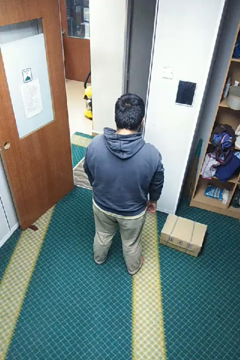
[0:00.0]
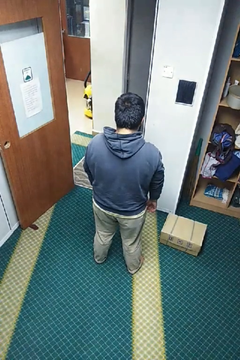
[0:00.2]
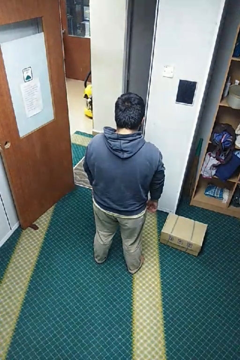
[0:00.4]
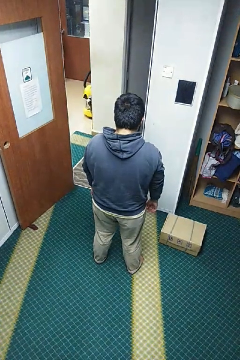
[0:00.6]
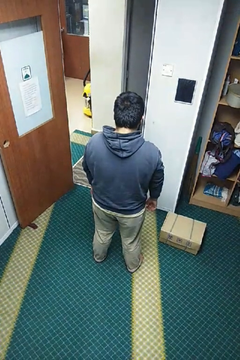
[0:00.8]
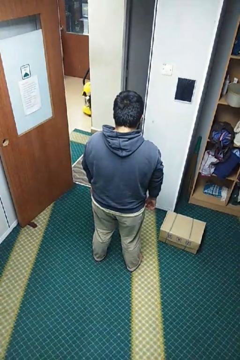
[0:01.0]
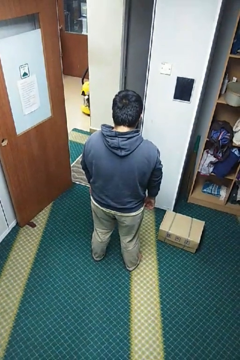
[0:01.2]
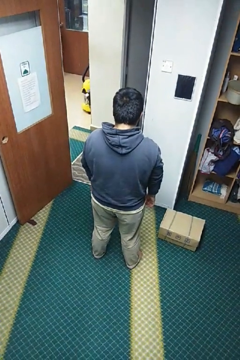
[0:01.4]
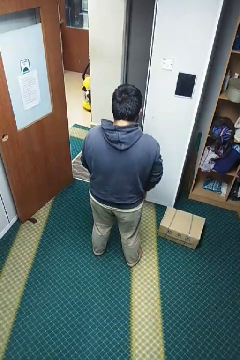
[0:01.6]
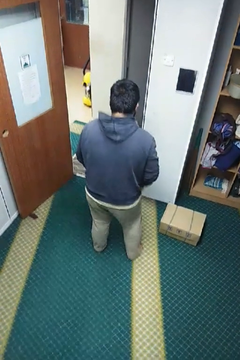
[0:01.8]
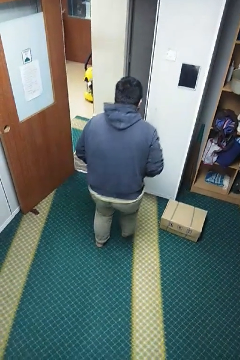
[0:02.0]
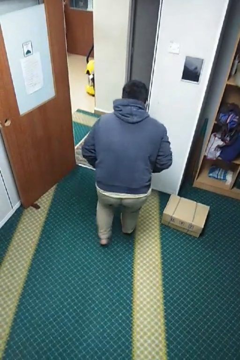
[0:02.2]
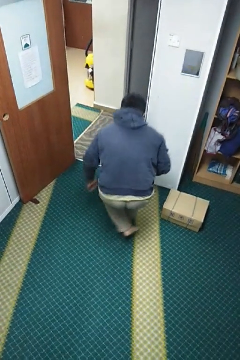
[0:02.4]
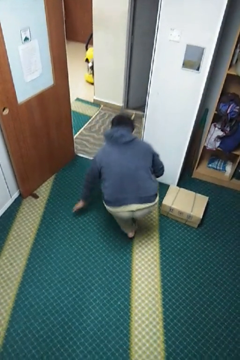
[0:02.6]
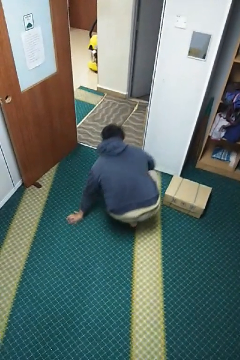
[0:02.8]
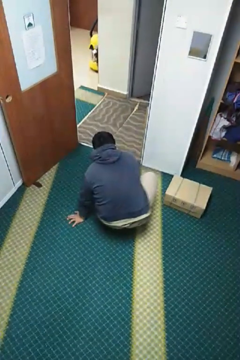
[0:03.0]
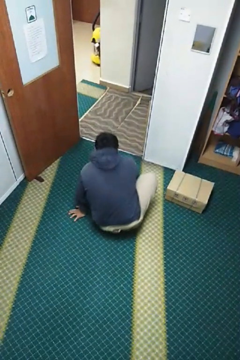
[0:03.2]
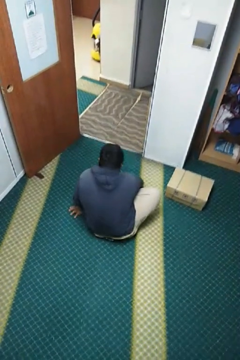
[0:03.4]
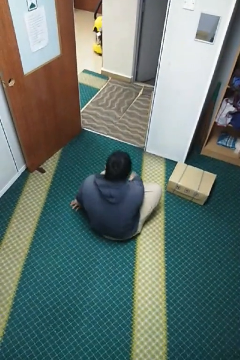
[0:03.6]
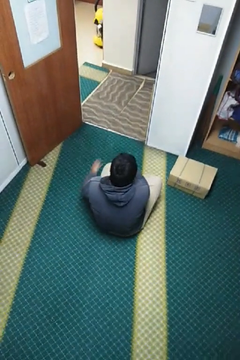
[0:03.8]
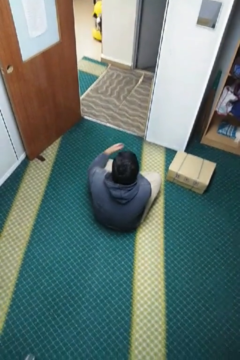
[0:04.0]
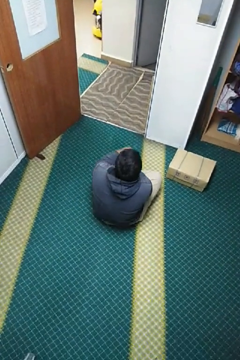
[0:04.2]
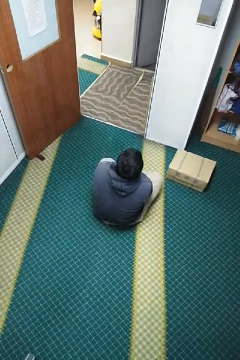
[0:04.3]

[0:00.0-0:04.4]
person sits crisscross

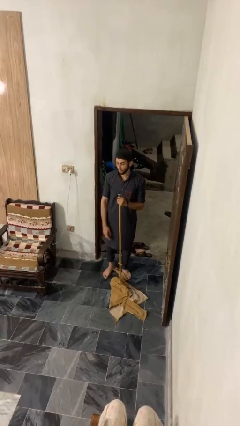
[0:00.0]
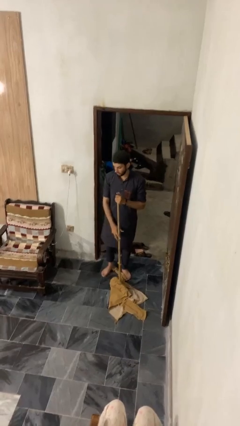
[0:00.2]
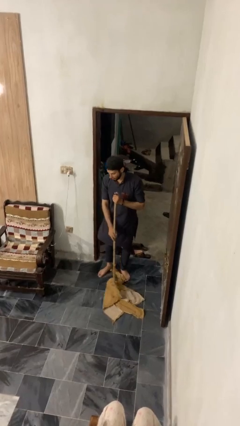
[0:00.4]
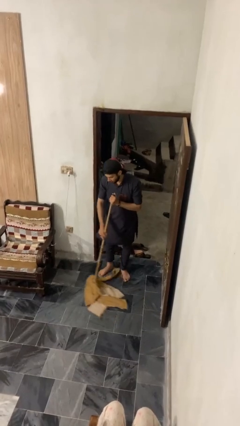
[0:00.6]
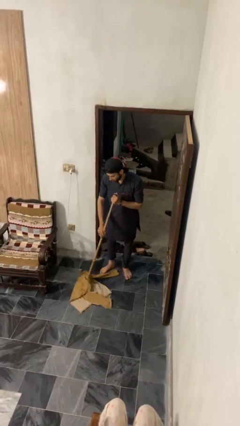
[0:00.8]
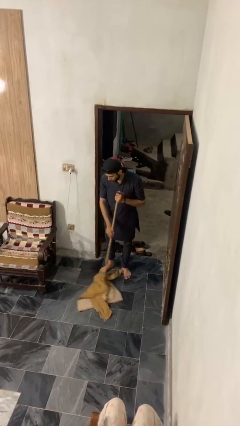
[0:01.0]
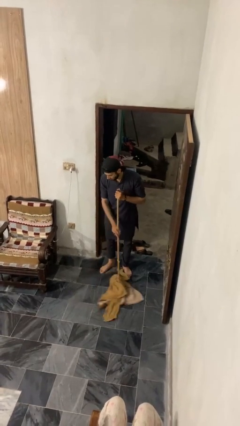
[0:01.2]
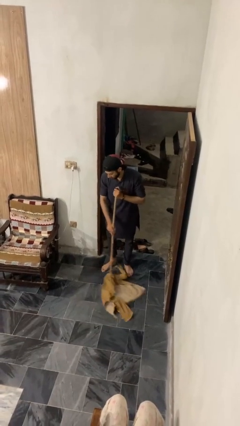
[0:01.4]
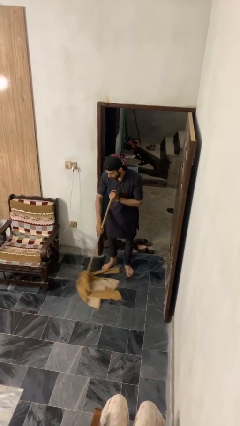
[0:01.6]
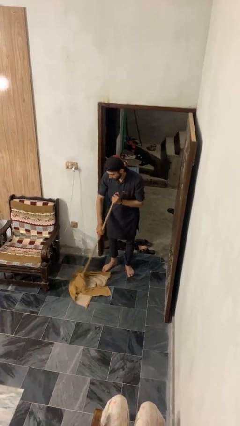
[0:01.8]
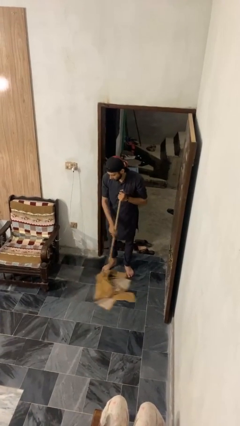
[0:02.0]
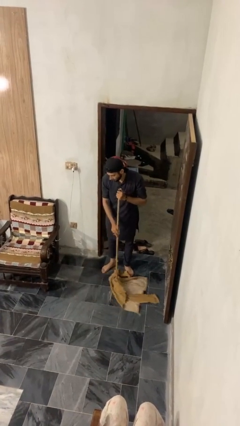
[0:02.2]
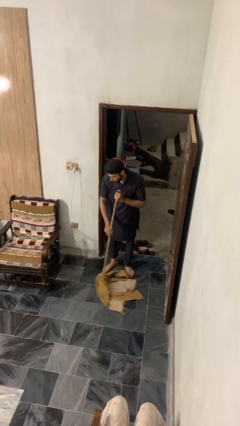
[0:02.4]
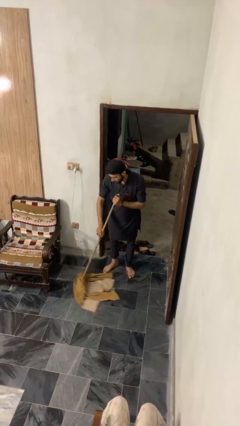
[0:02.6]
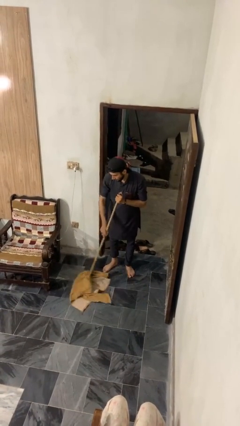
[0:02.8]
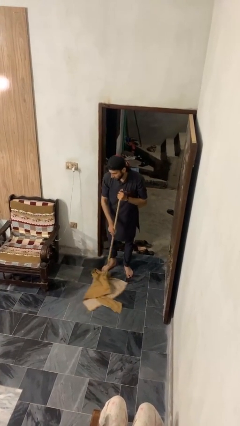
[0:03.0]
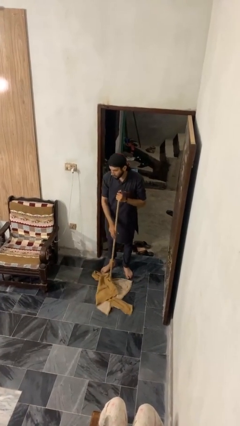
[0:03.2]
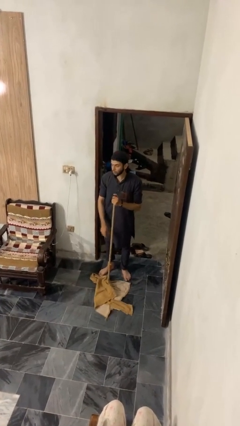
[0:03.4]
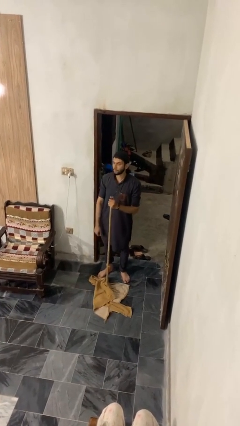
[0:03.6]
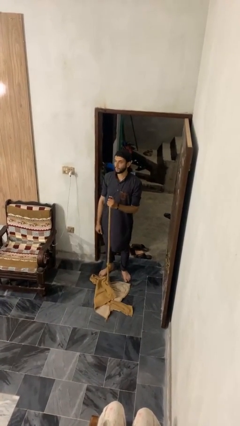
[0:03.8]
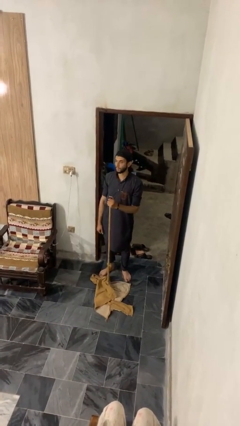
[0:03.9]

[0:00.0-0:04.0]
person mops

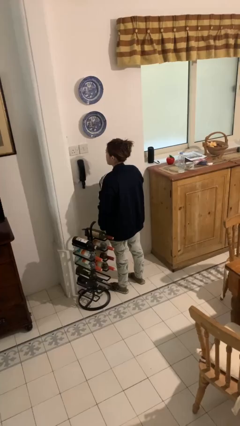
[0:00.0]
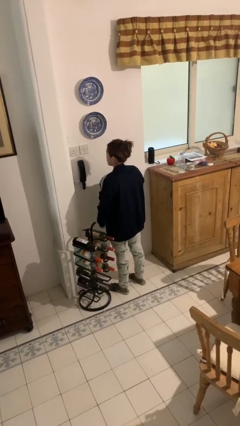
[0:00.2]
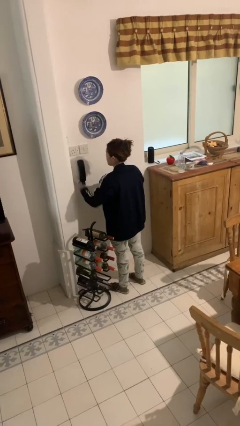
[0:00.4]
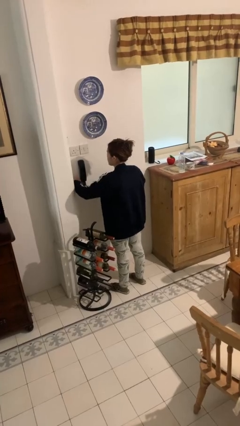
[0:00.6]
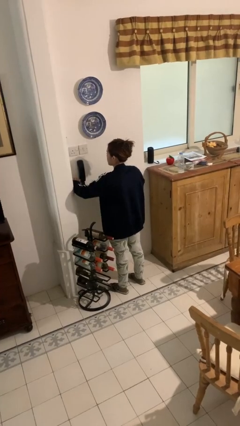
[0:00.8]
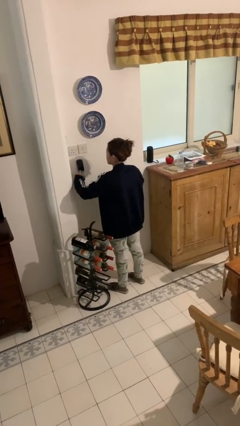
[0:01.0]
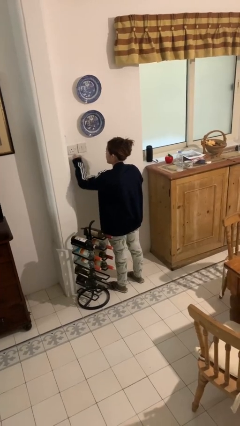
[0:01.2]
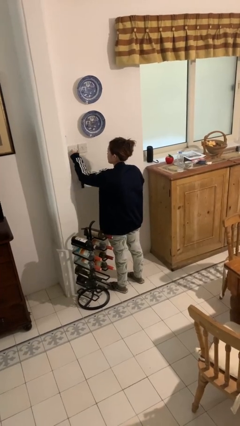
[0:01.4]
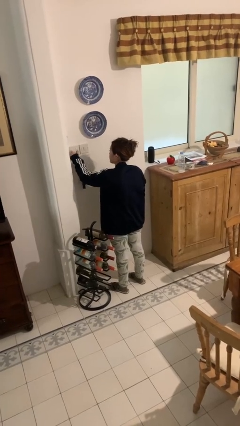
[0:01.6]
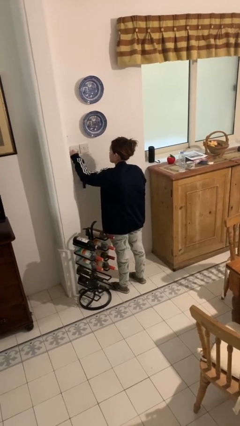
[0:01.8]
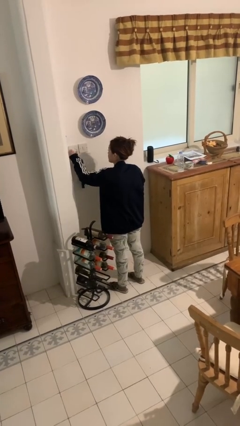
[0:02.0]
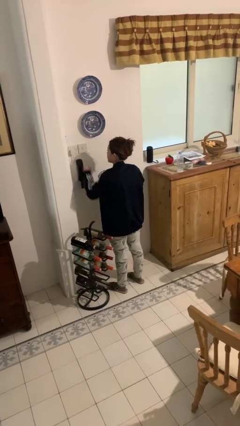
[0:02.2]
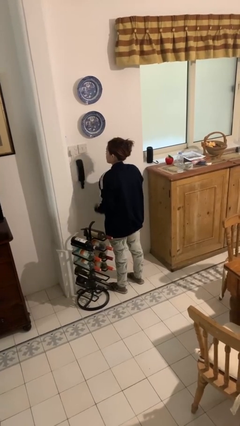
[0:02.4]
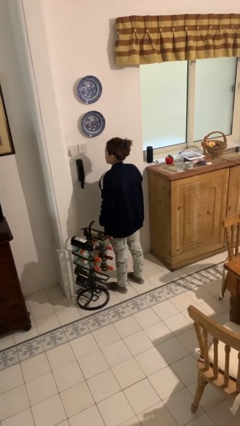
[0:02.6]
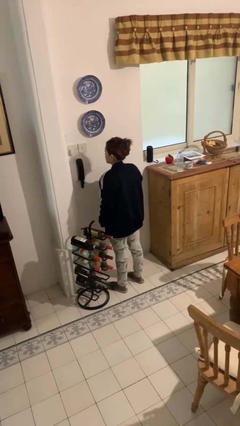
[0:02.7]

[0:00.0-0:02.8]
person plugs into electrical socket

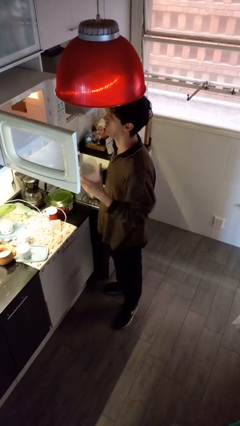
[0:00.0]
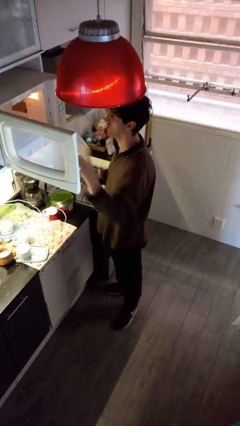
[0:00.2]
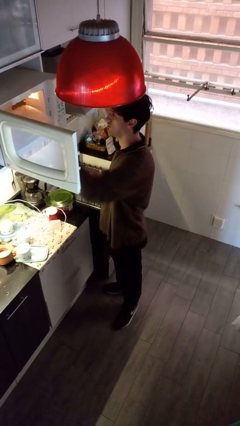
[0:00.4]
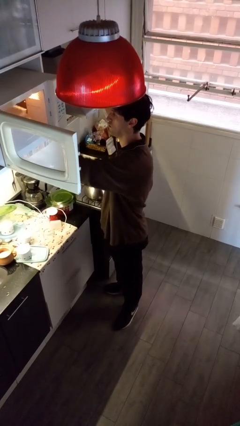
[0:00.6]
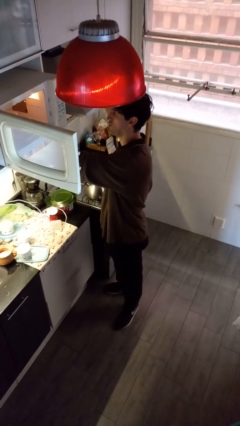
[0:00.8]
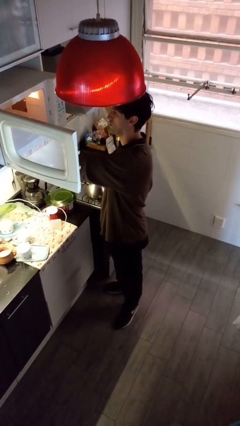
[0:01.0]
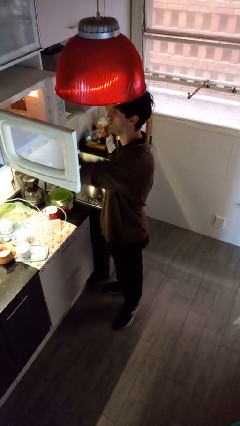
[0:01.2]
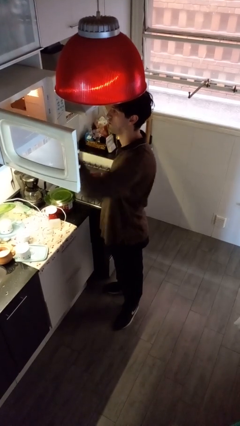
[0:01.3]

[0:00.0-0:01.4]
person puts object into microwave

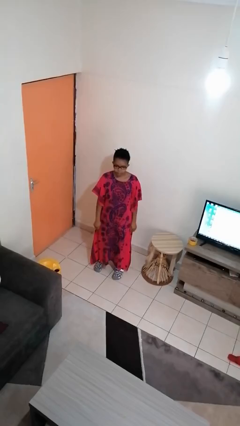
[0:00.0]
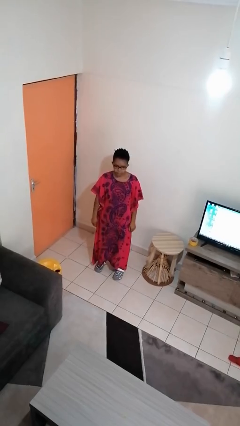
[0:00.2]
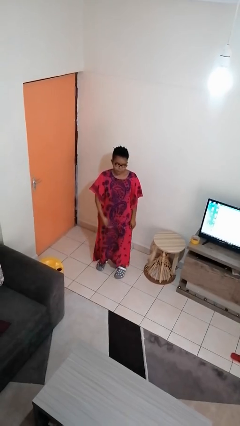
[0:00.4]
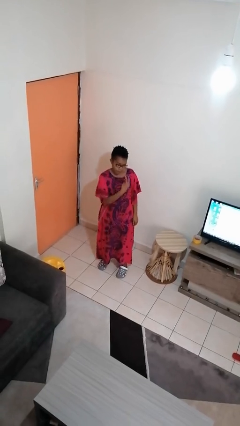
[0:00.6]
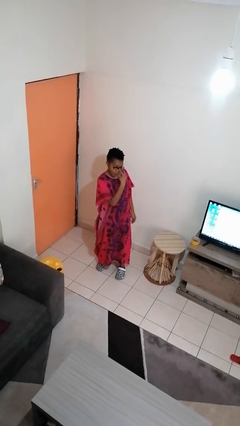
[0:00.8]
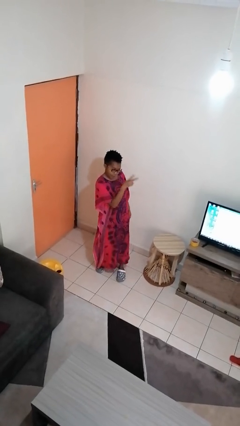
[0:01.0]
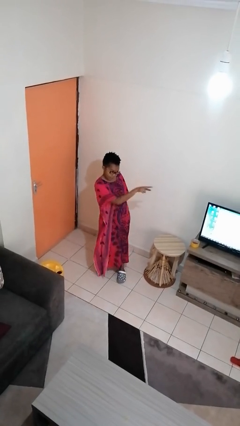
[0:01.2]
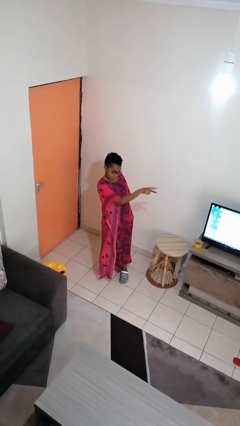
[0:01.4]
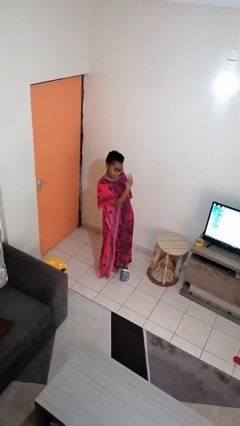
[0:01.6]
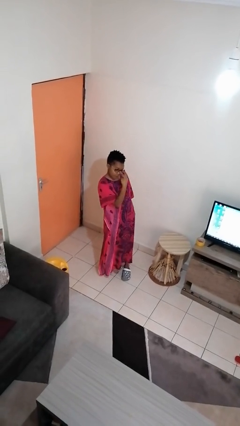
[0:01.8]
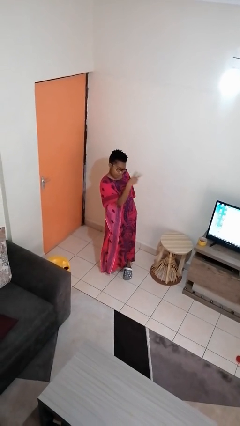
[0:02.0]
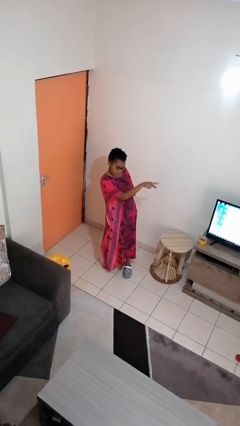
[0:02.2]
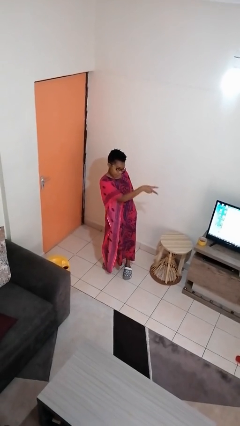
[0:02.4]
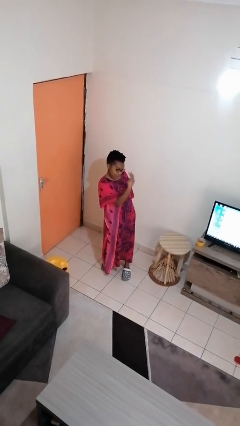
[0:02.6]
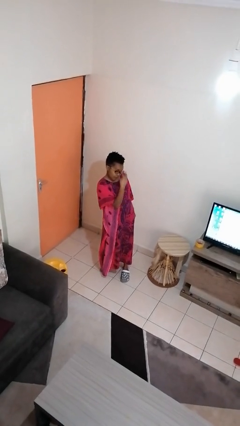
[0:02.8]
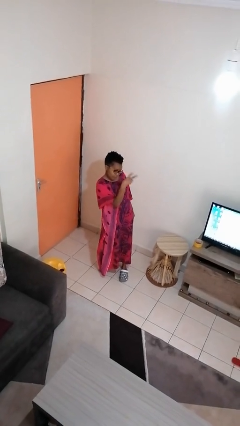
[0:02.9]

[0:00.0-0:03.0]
person gestures watch closely

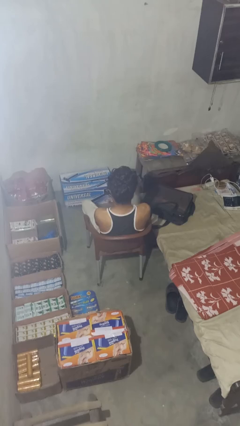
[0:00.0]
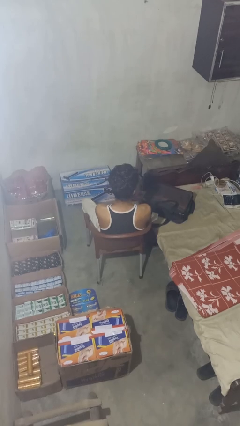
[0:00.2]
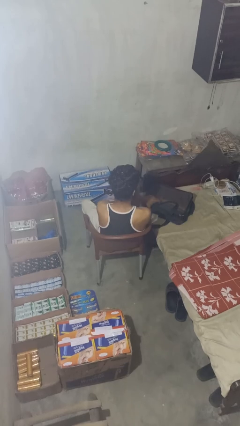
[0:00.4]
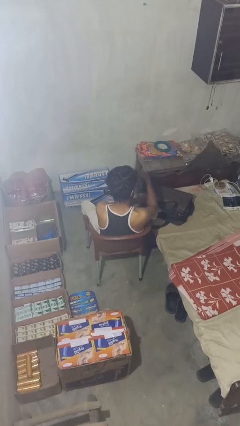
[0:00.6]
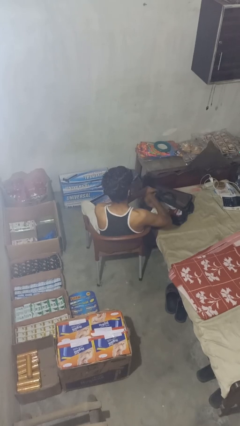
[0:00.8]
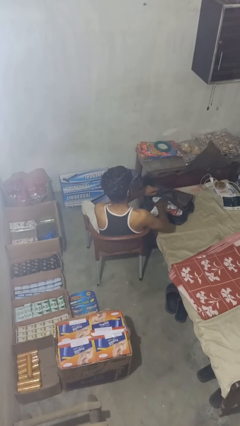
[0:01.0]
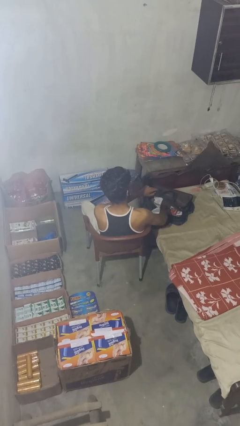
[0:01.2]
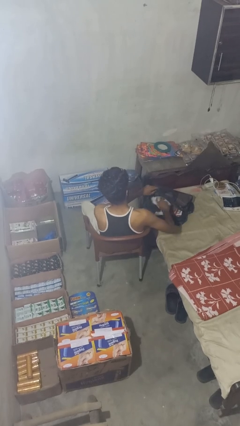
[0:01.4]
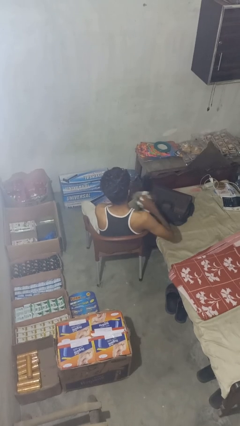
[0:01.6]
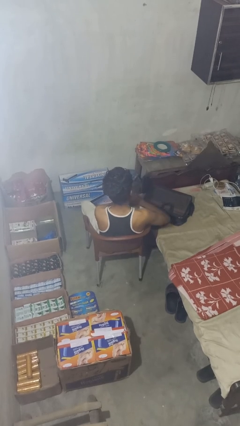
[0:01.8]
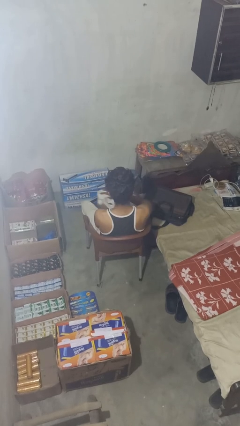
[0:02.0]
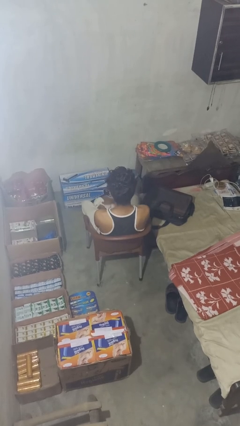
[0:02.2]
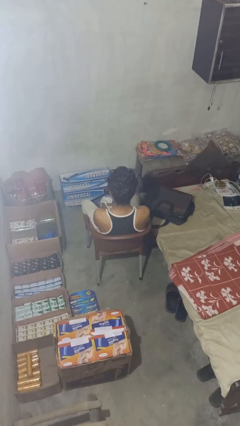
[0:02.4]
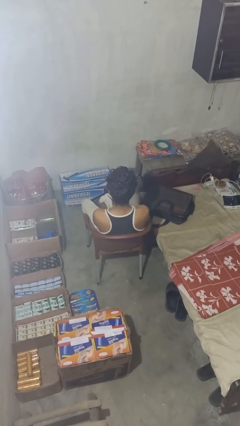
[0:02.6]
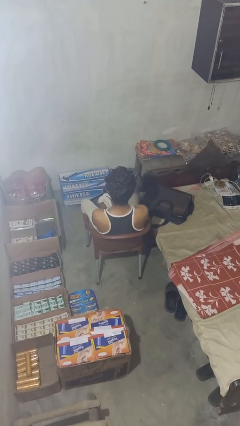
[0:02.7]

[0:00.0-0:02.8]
person unloads clothes from suitcase
